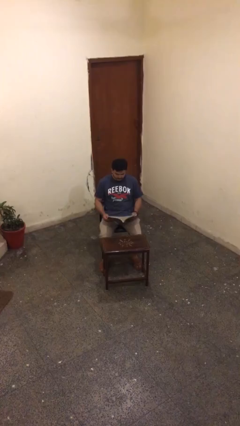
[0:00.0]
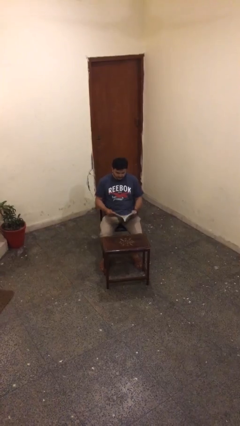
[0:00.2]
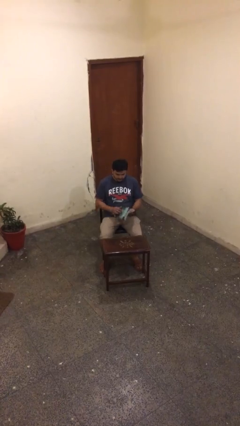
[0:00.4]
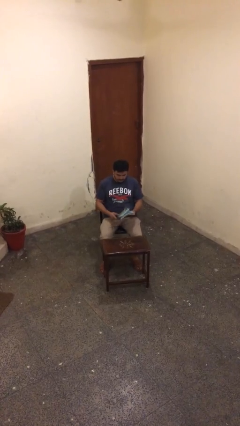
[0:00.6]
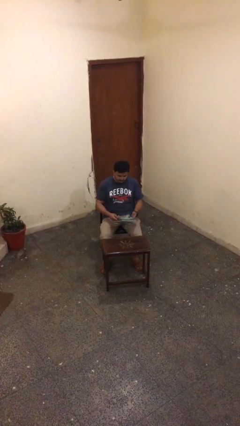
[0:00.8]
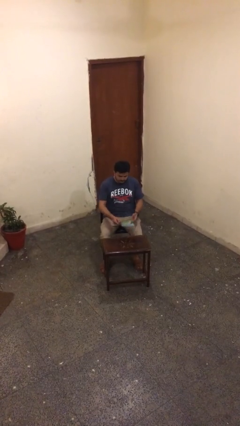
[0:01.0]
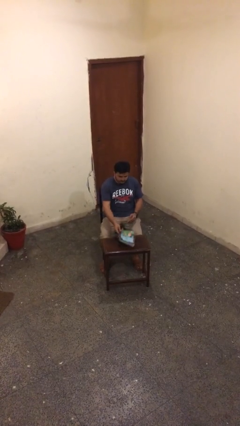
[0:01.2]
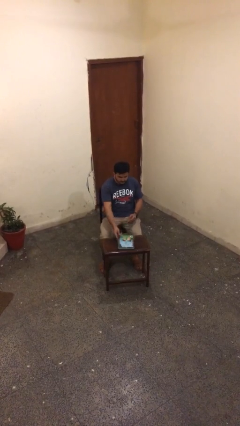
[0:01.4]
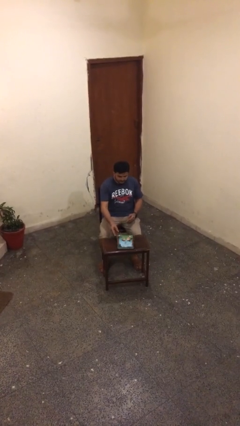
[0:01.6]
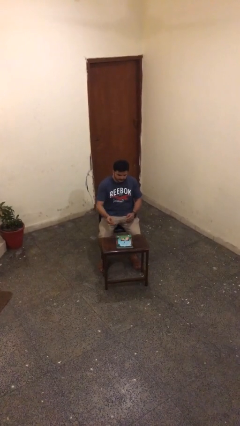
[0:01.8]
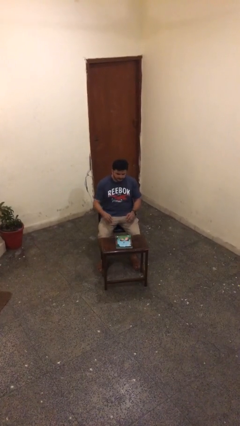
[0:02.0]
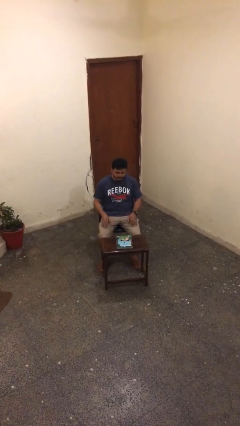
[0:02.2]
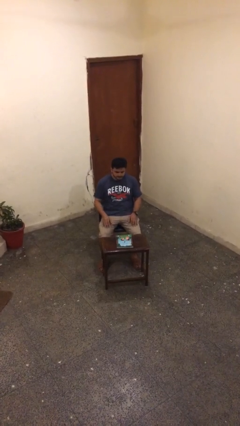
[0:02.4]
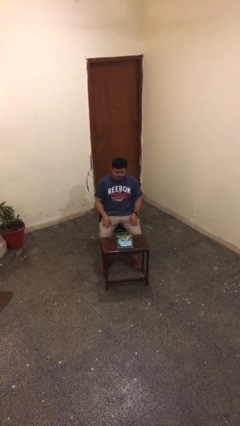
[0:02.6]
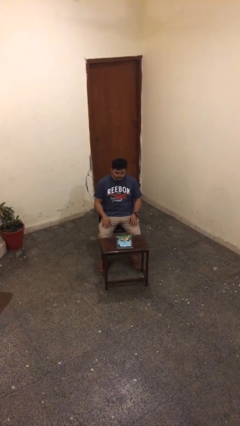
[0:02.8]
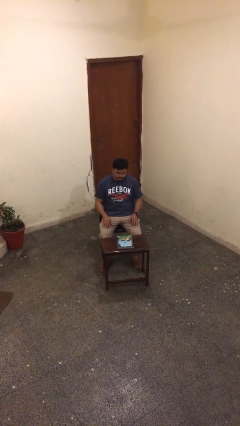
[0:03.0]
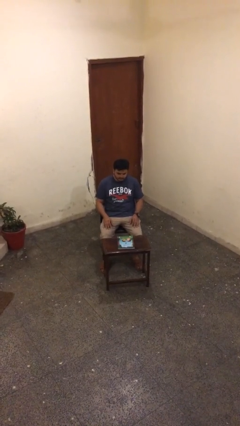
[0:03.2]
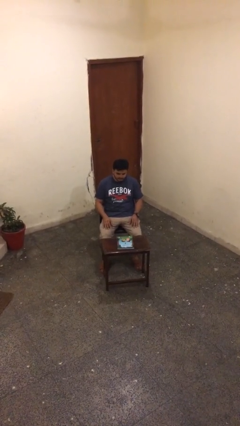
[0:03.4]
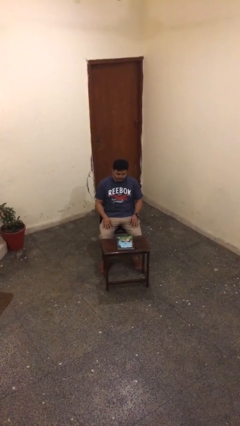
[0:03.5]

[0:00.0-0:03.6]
person puts down object on table

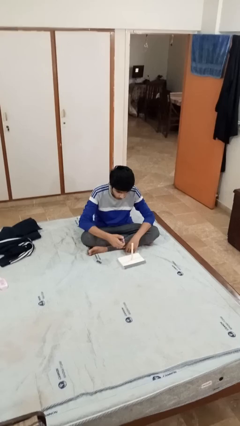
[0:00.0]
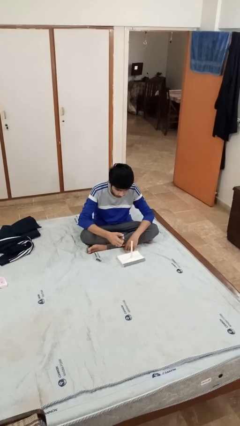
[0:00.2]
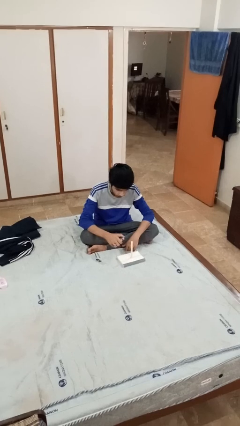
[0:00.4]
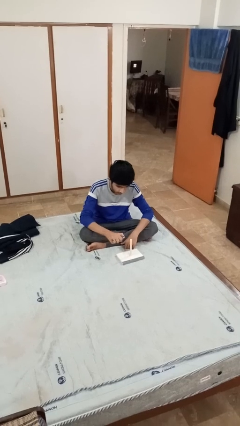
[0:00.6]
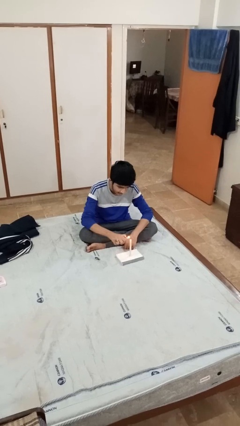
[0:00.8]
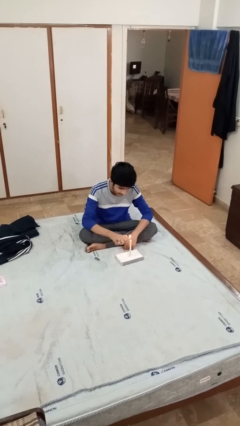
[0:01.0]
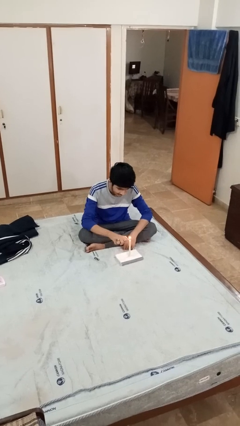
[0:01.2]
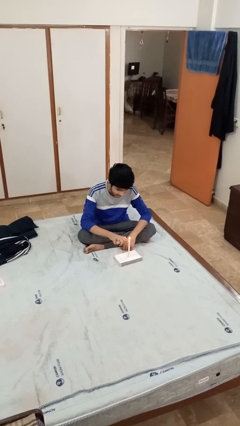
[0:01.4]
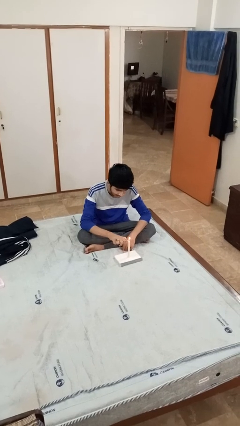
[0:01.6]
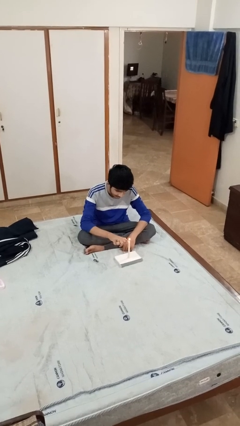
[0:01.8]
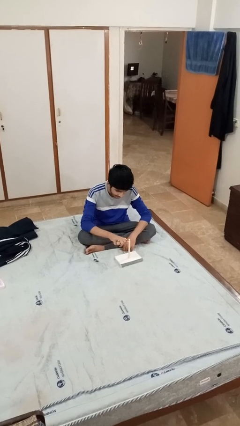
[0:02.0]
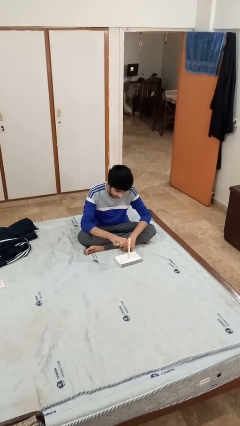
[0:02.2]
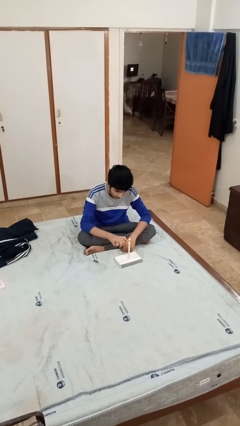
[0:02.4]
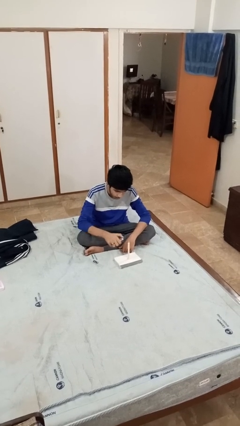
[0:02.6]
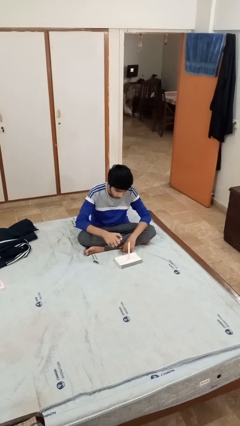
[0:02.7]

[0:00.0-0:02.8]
person lights candle

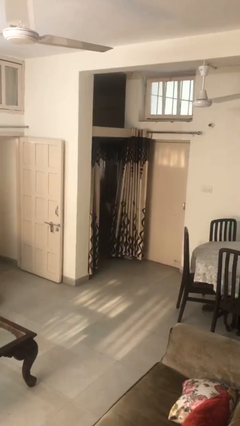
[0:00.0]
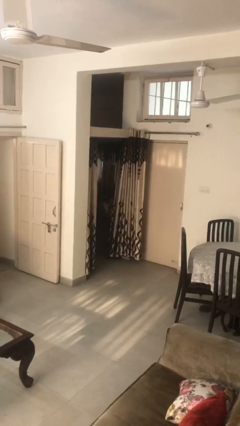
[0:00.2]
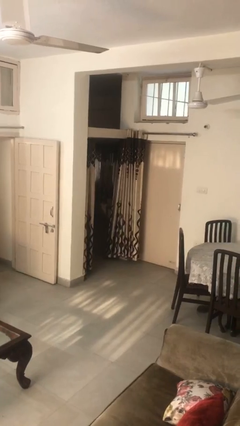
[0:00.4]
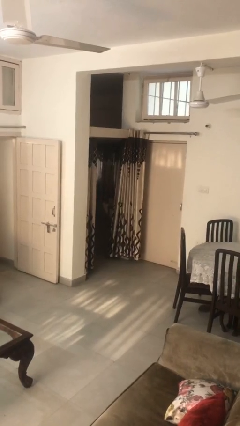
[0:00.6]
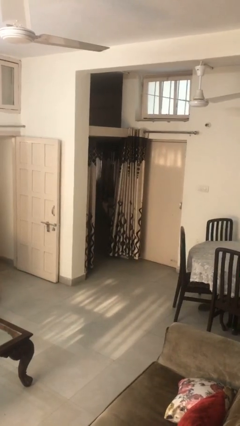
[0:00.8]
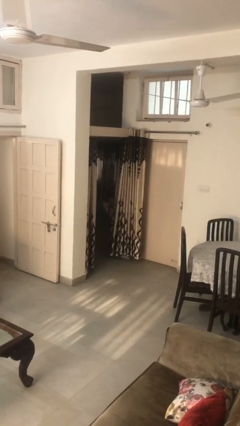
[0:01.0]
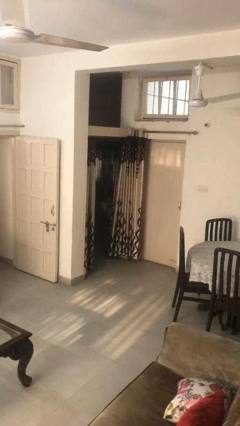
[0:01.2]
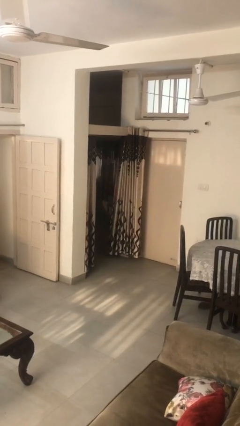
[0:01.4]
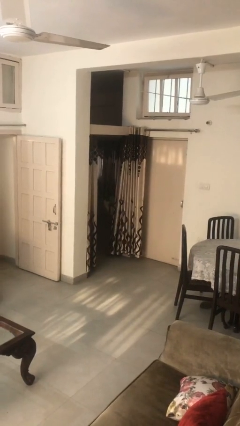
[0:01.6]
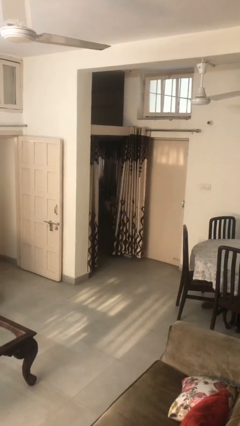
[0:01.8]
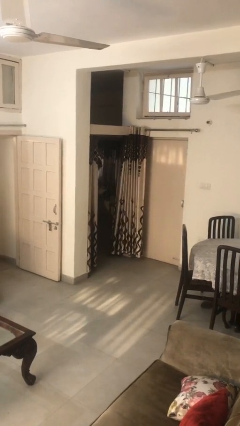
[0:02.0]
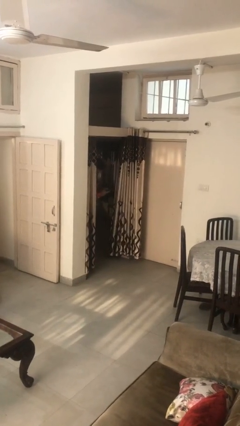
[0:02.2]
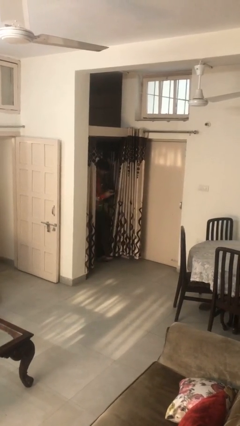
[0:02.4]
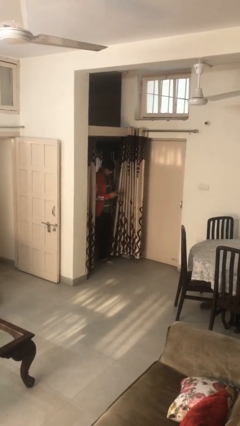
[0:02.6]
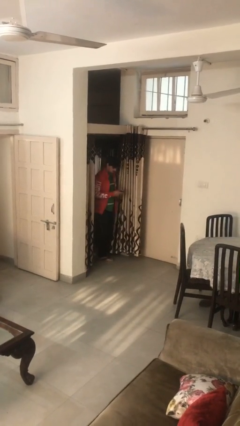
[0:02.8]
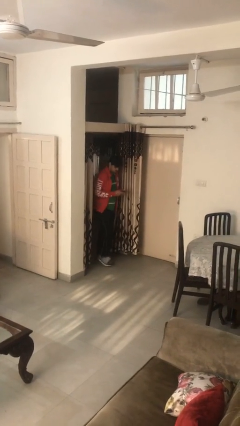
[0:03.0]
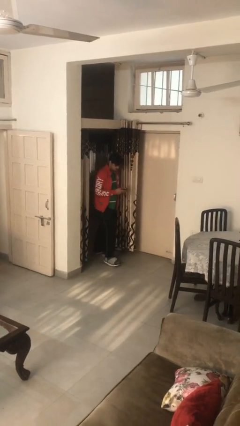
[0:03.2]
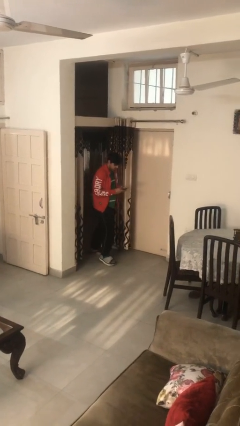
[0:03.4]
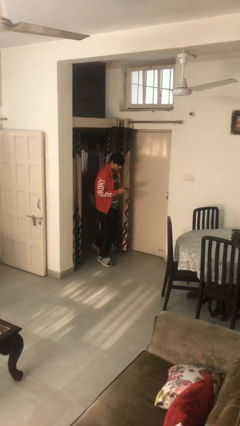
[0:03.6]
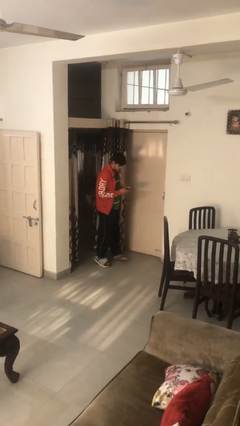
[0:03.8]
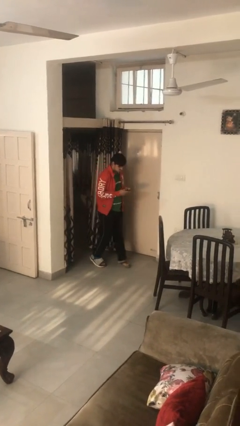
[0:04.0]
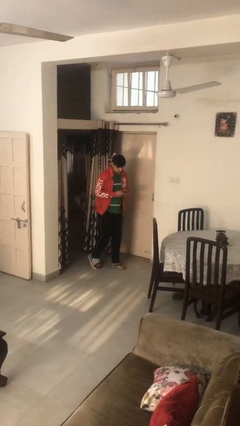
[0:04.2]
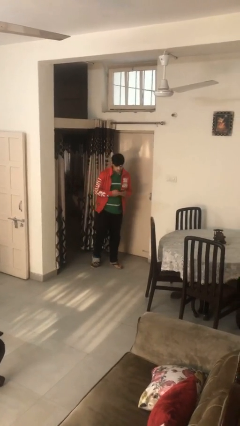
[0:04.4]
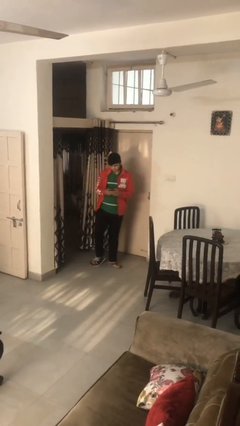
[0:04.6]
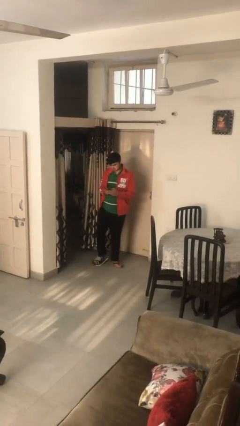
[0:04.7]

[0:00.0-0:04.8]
person enters scene through structure

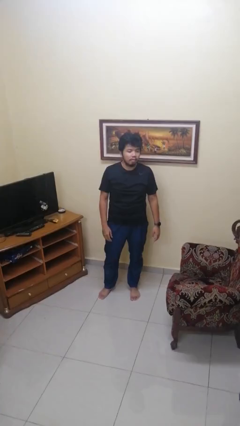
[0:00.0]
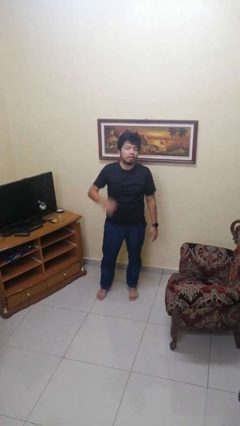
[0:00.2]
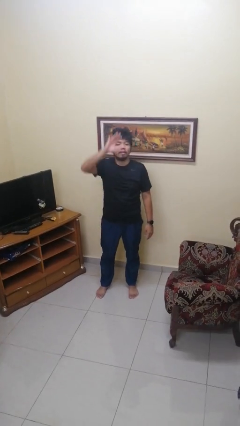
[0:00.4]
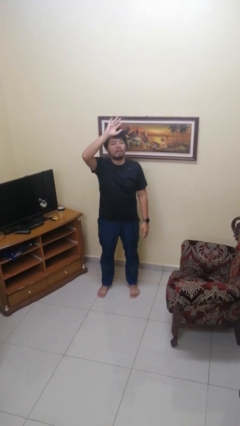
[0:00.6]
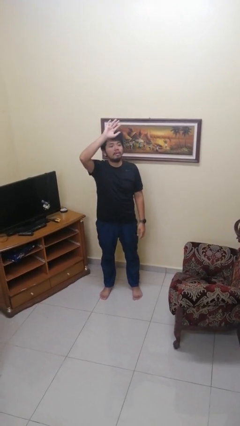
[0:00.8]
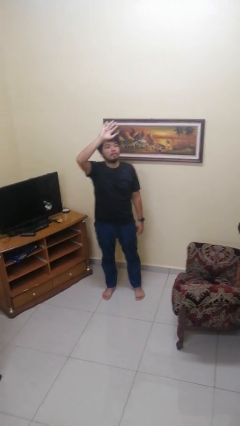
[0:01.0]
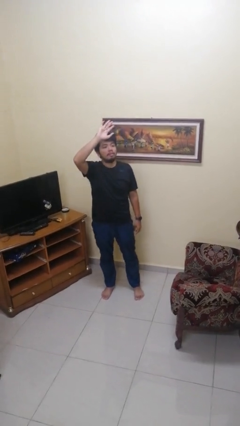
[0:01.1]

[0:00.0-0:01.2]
person gestures raise hand

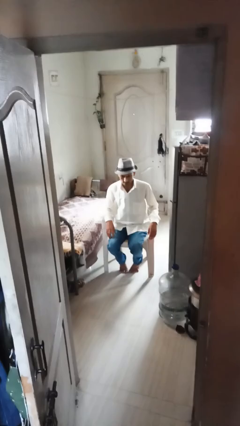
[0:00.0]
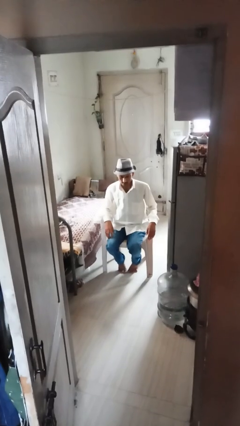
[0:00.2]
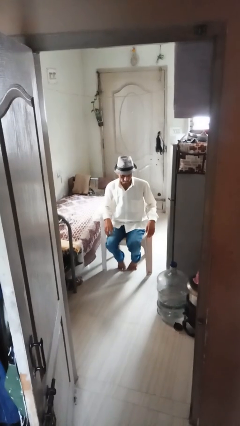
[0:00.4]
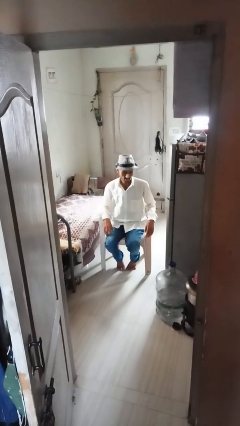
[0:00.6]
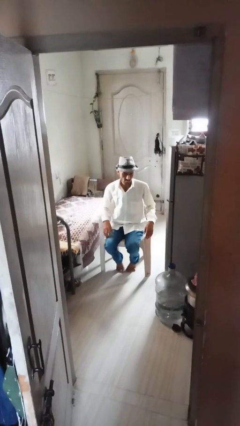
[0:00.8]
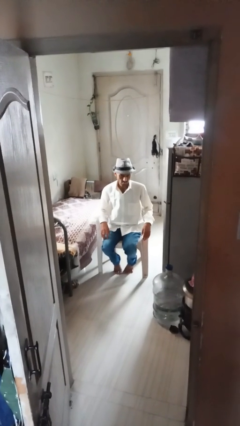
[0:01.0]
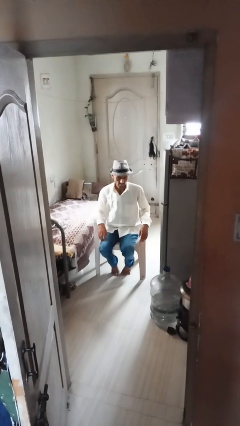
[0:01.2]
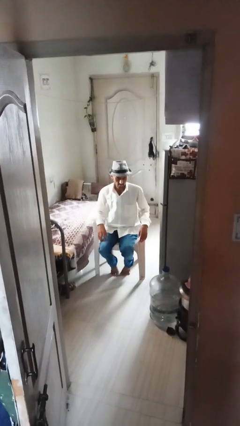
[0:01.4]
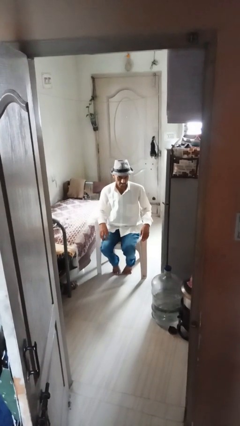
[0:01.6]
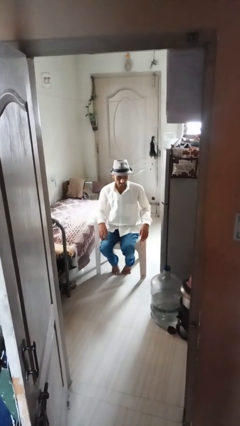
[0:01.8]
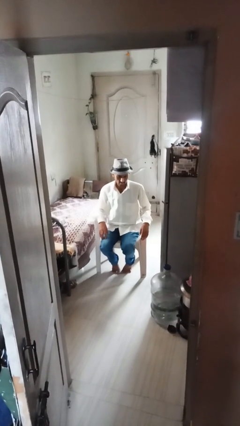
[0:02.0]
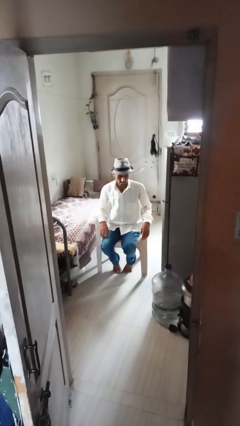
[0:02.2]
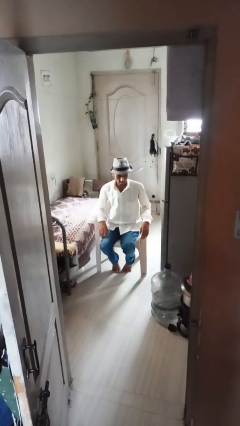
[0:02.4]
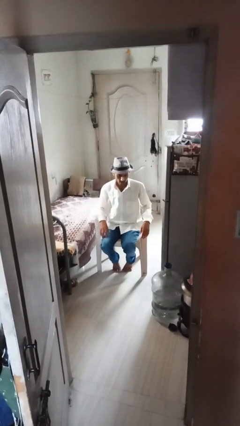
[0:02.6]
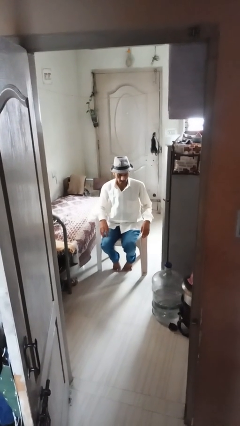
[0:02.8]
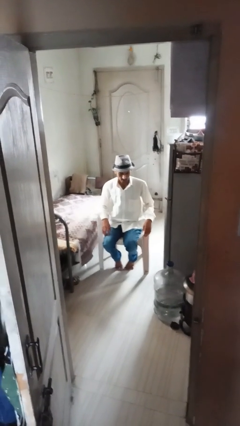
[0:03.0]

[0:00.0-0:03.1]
person sticks out tongue

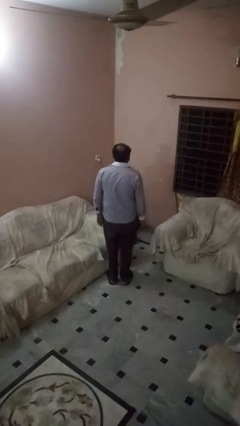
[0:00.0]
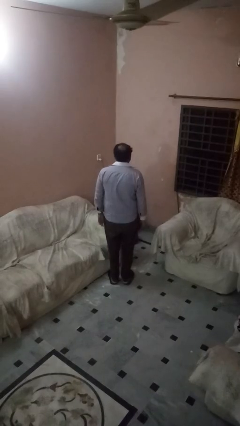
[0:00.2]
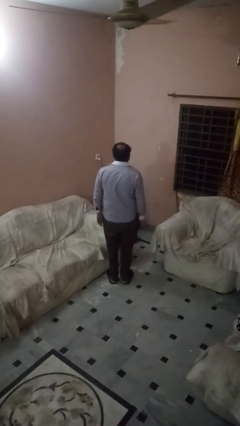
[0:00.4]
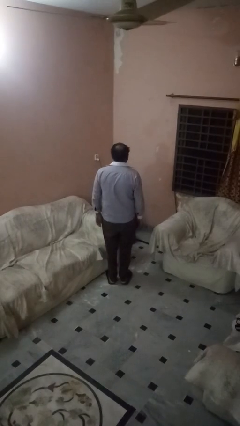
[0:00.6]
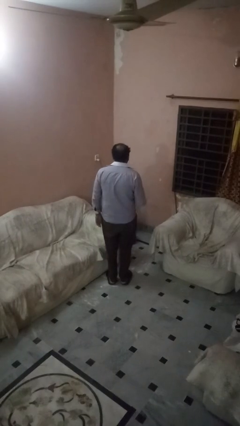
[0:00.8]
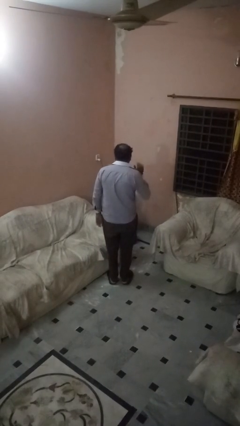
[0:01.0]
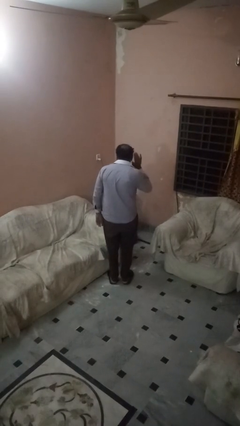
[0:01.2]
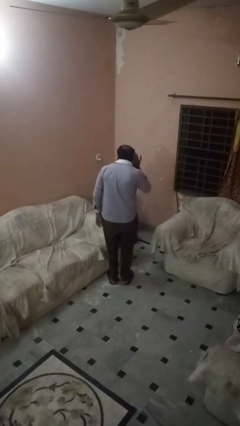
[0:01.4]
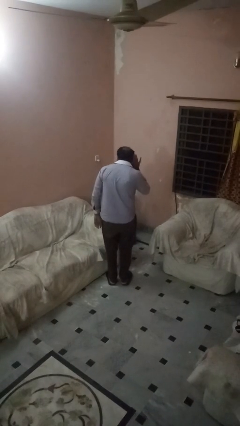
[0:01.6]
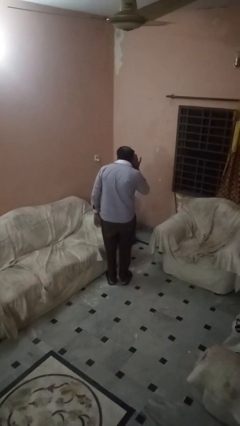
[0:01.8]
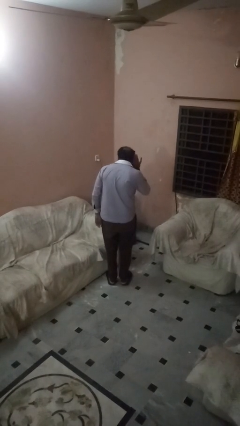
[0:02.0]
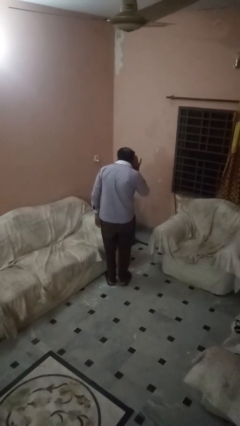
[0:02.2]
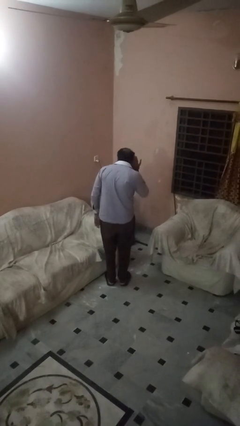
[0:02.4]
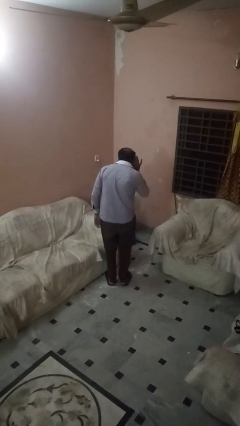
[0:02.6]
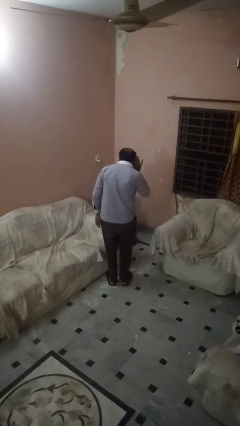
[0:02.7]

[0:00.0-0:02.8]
person gestures listen closely
